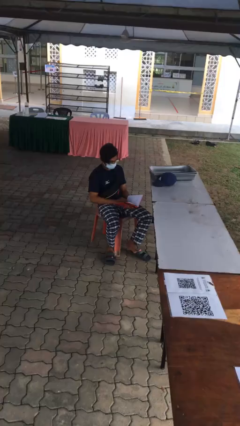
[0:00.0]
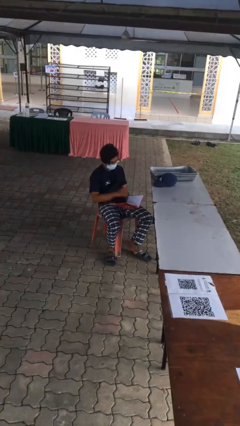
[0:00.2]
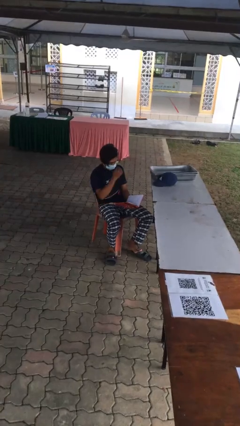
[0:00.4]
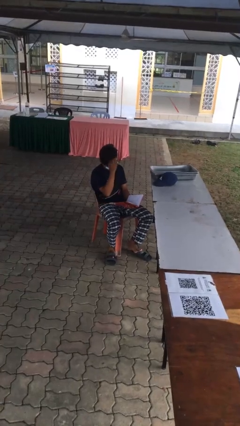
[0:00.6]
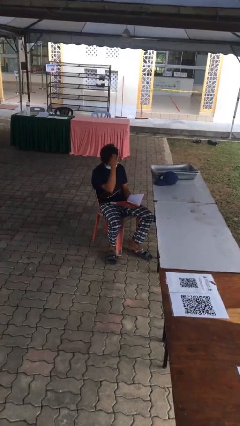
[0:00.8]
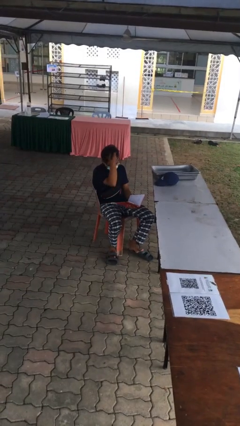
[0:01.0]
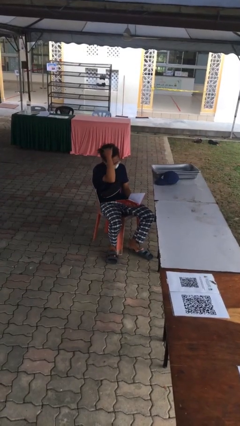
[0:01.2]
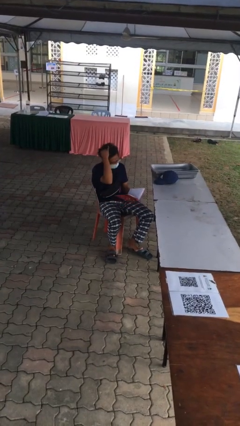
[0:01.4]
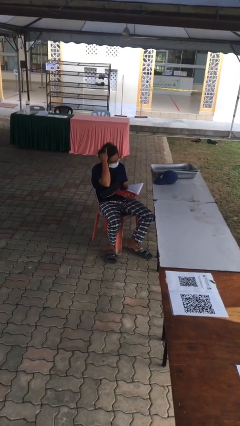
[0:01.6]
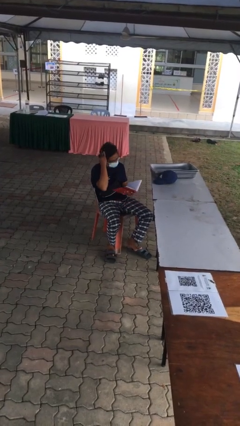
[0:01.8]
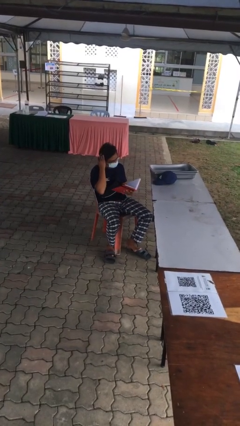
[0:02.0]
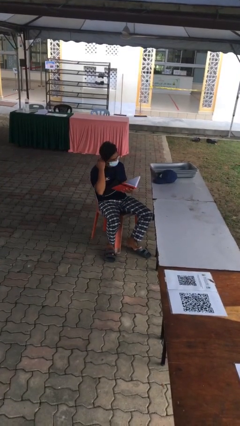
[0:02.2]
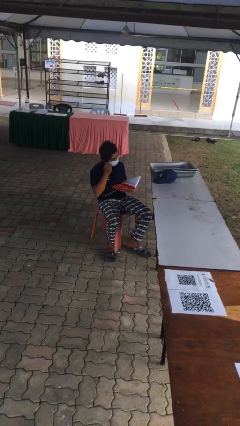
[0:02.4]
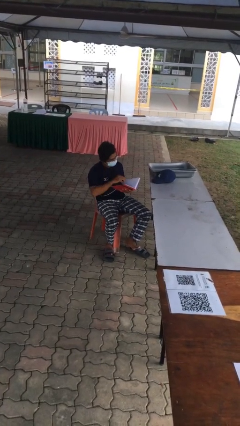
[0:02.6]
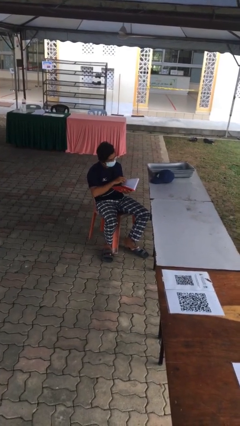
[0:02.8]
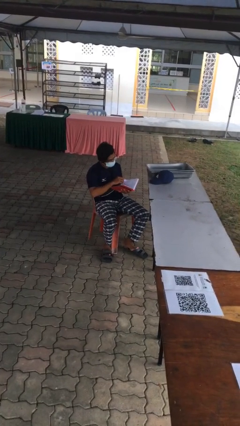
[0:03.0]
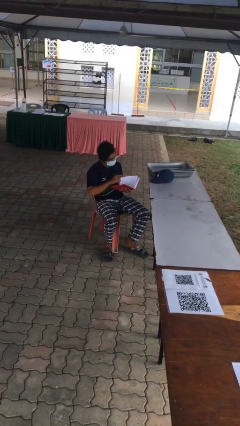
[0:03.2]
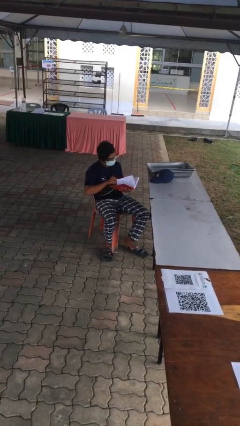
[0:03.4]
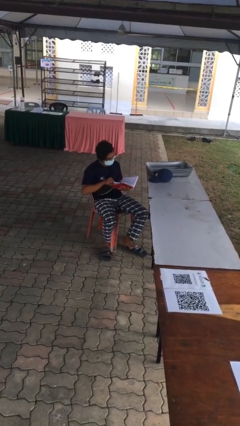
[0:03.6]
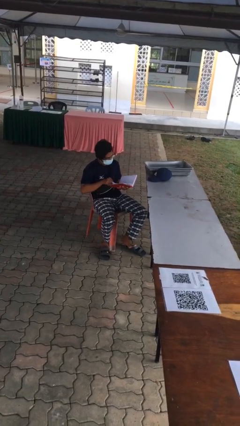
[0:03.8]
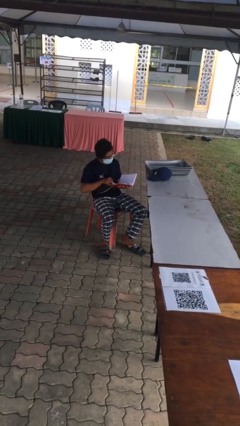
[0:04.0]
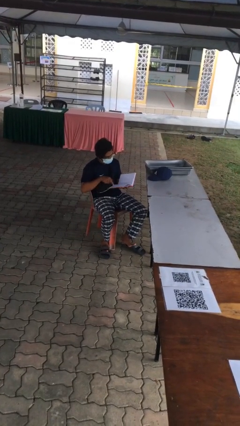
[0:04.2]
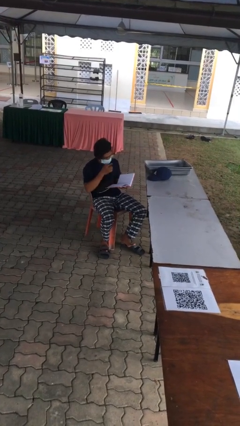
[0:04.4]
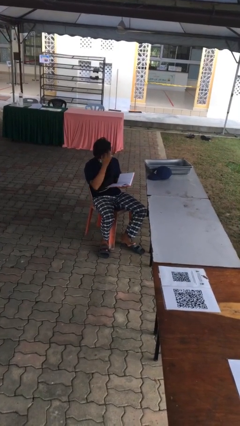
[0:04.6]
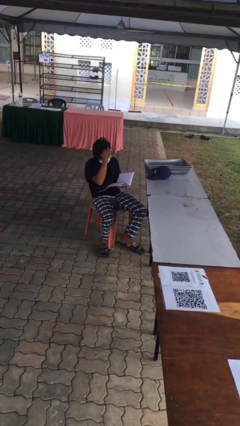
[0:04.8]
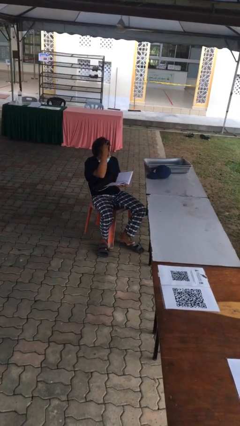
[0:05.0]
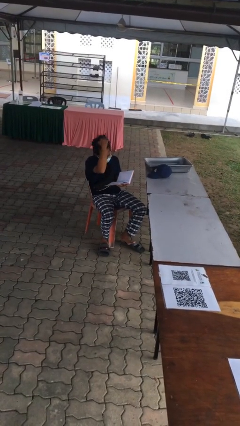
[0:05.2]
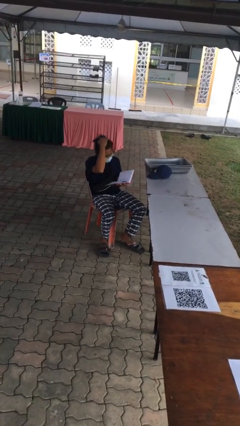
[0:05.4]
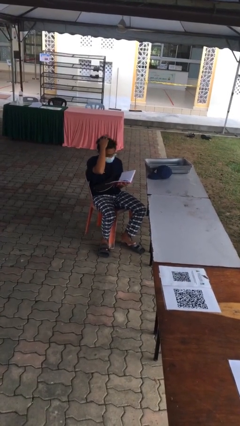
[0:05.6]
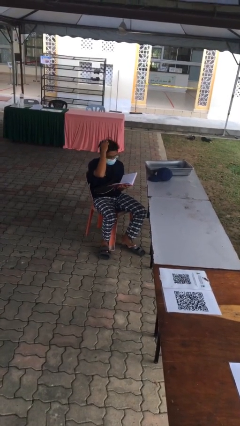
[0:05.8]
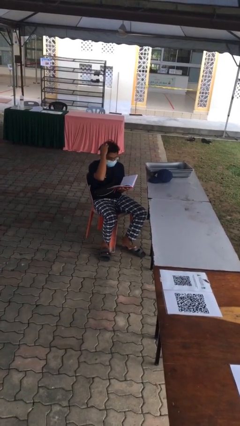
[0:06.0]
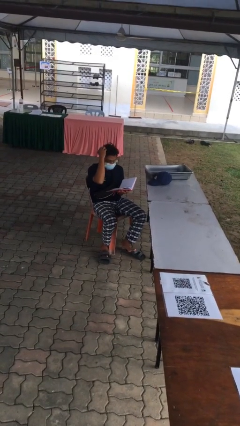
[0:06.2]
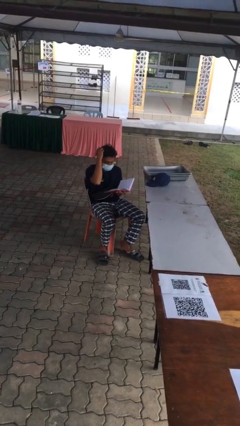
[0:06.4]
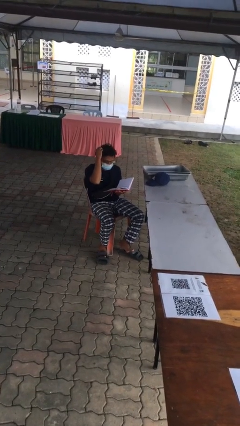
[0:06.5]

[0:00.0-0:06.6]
person reads document

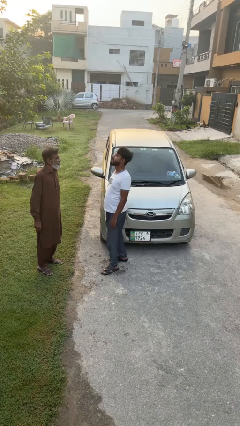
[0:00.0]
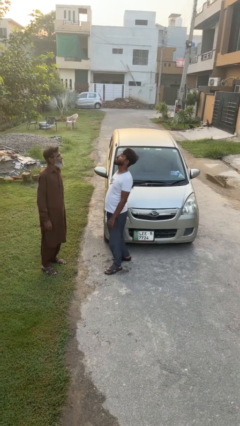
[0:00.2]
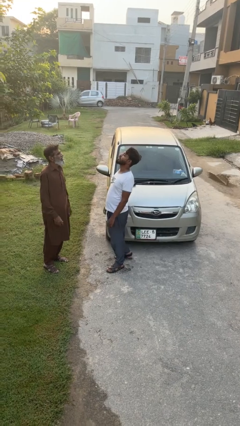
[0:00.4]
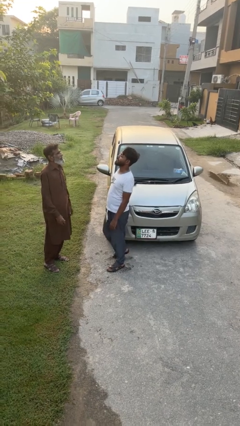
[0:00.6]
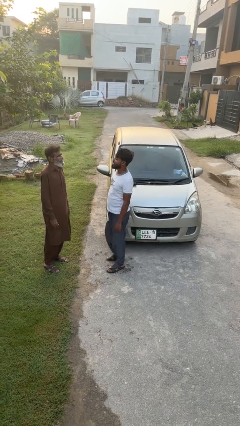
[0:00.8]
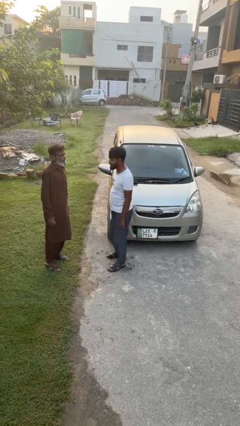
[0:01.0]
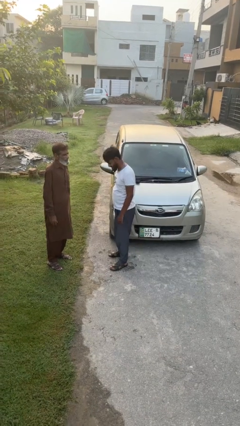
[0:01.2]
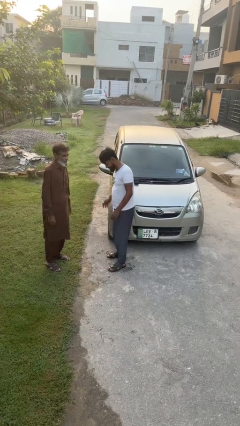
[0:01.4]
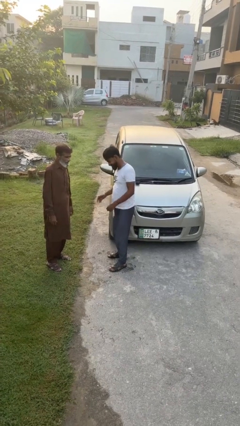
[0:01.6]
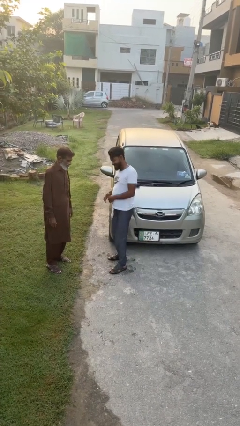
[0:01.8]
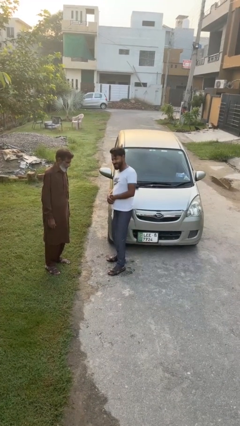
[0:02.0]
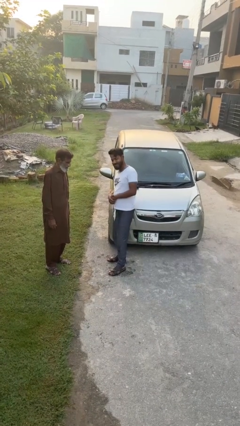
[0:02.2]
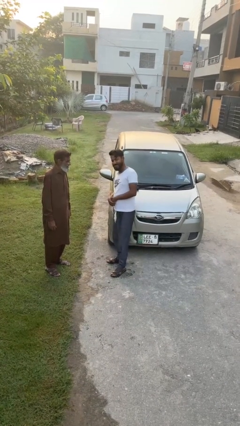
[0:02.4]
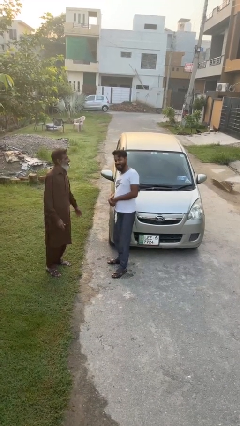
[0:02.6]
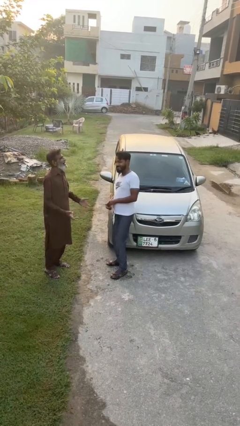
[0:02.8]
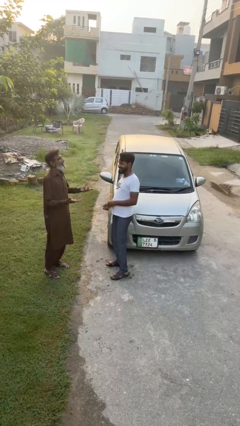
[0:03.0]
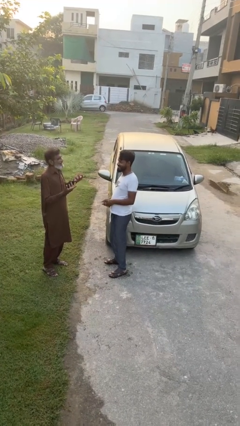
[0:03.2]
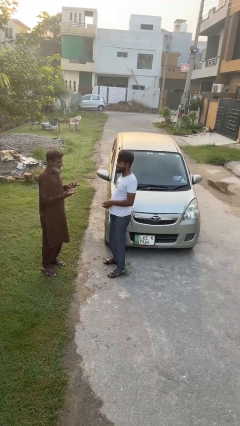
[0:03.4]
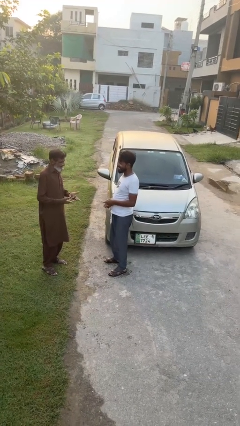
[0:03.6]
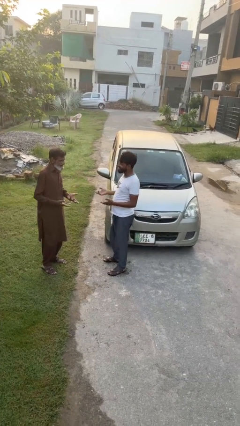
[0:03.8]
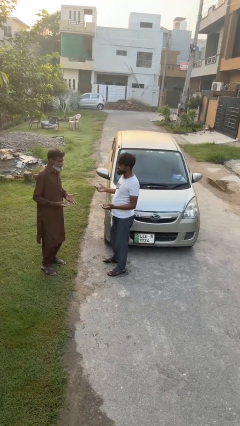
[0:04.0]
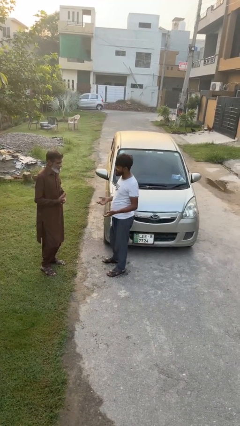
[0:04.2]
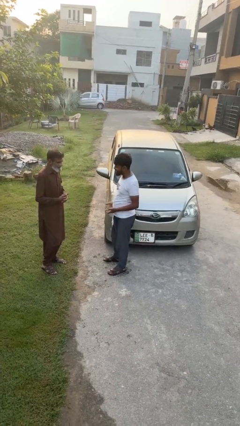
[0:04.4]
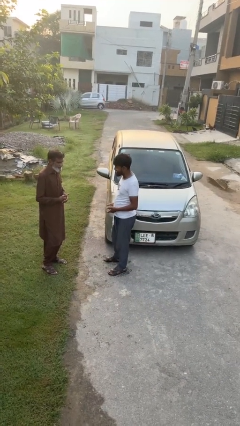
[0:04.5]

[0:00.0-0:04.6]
person laughs with person

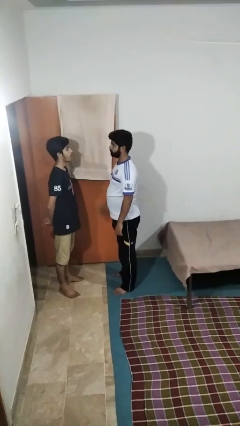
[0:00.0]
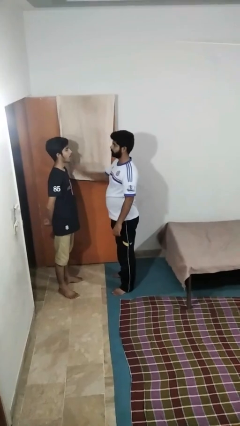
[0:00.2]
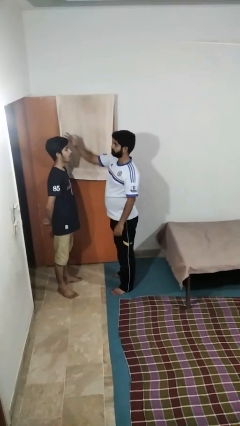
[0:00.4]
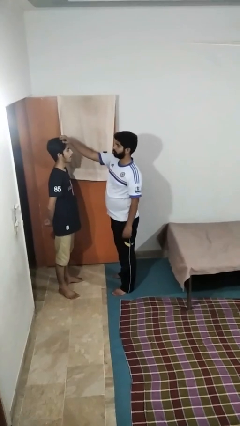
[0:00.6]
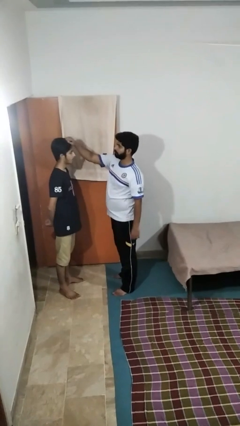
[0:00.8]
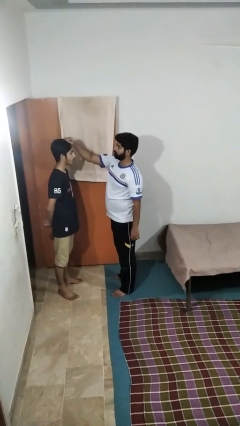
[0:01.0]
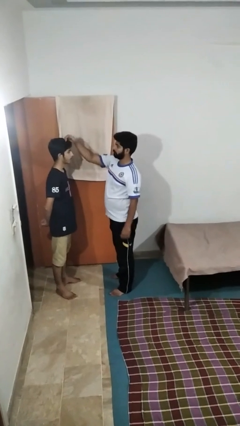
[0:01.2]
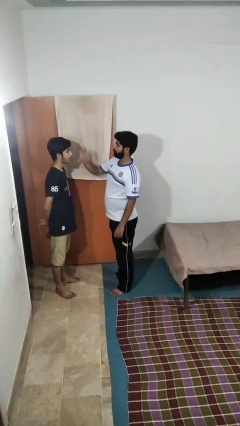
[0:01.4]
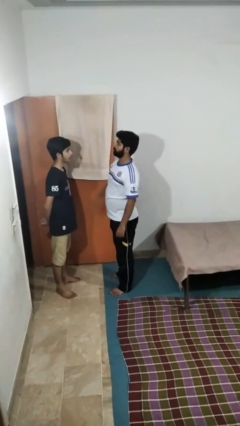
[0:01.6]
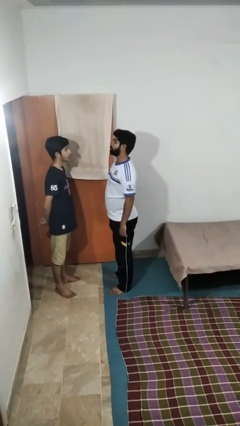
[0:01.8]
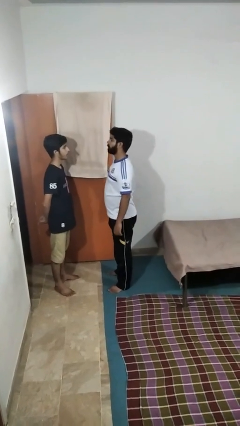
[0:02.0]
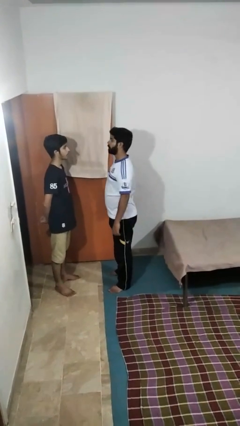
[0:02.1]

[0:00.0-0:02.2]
person grabs person by hair

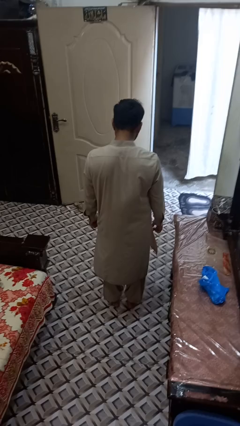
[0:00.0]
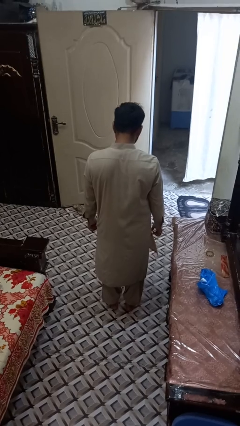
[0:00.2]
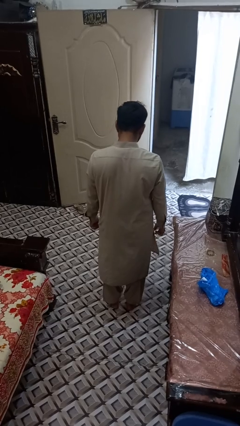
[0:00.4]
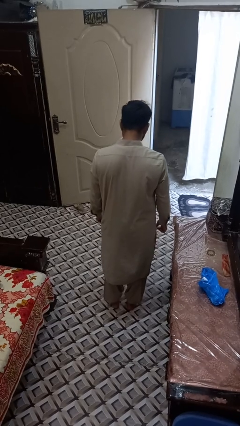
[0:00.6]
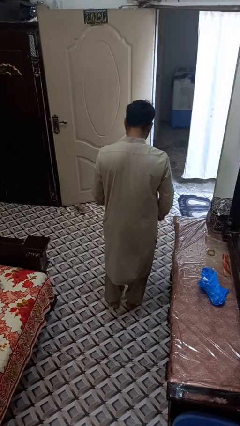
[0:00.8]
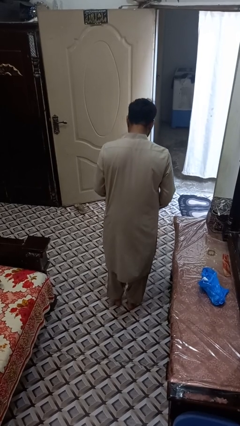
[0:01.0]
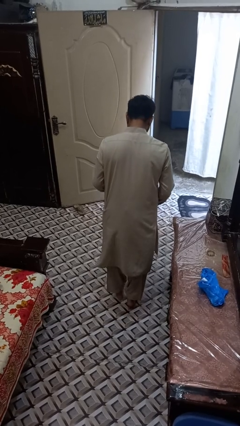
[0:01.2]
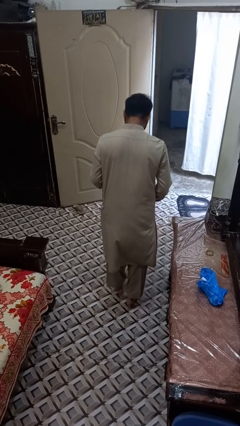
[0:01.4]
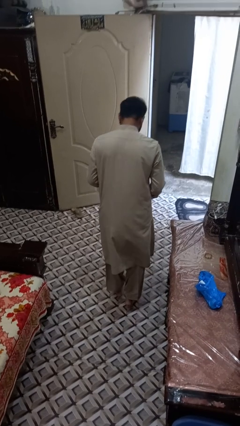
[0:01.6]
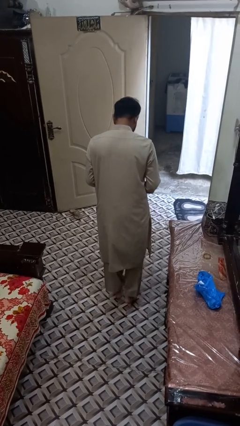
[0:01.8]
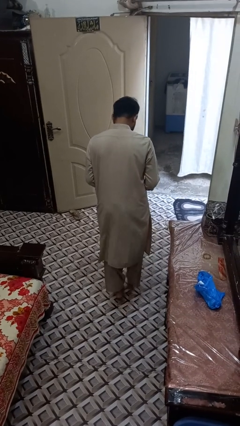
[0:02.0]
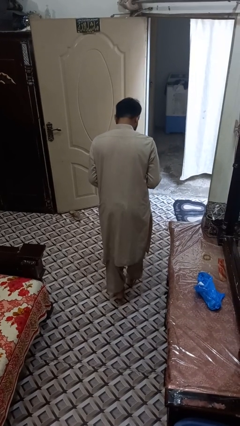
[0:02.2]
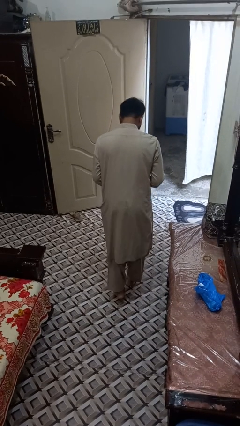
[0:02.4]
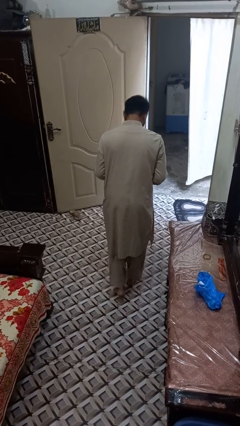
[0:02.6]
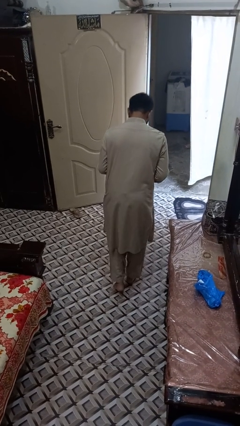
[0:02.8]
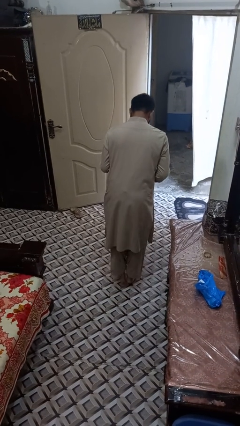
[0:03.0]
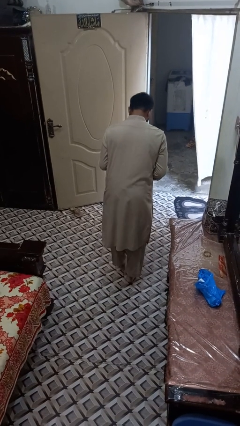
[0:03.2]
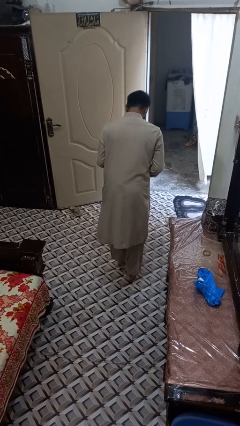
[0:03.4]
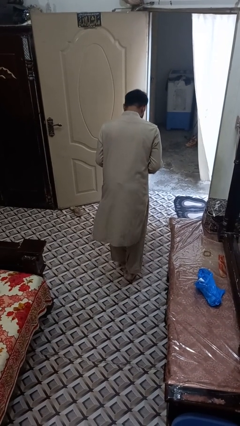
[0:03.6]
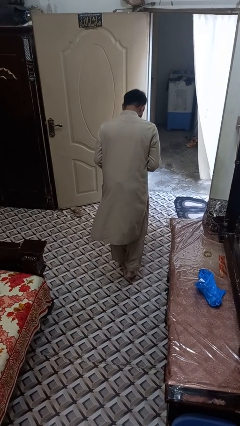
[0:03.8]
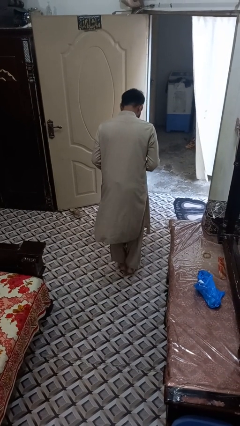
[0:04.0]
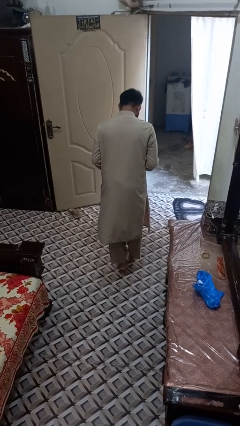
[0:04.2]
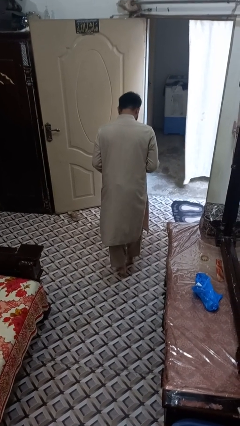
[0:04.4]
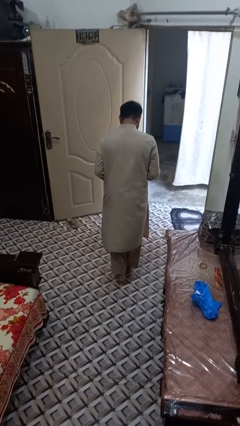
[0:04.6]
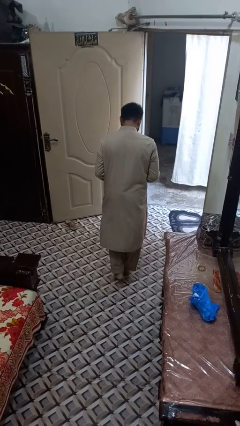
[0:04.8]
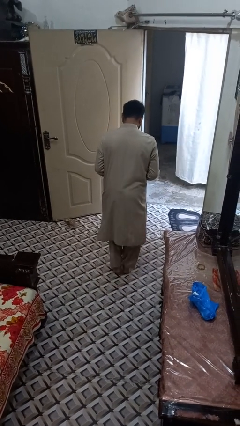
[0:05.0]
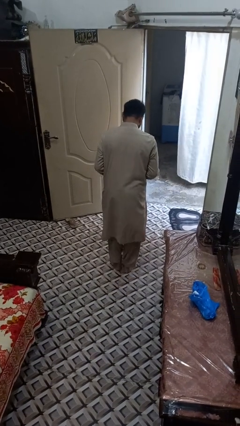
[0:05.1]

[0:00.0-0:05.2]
person walks tiptoe
